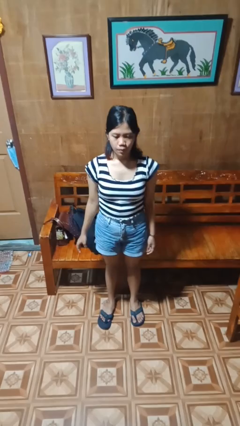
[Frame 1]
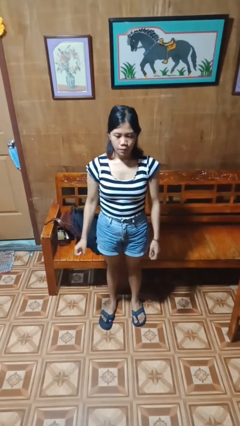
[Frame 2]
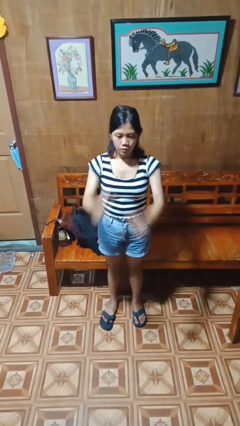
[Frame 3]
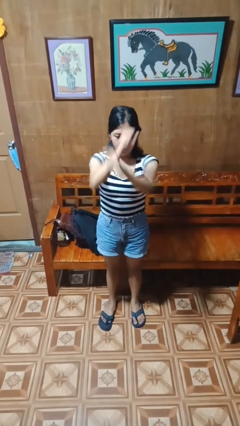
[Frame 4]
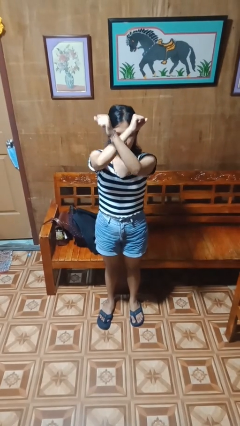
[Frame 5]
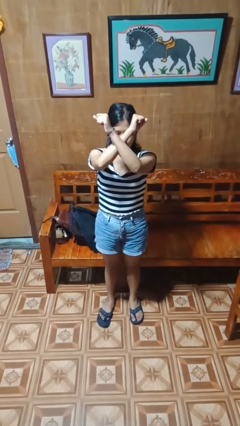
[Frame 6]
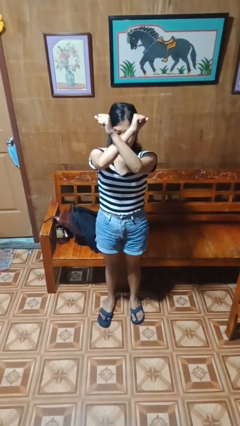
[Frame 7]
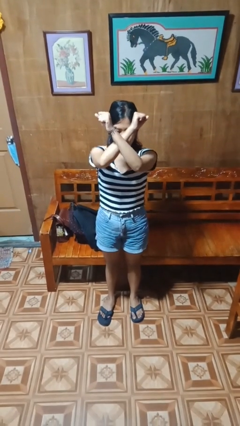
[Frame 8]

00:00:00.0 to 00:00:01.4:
person gestures arms x

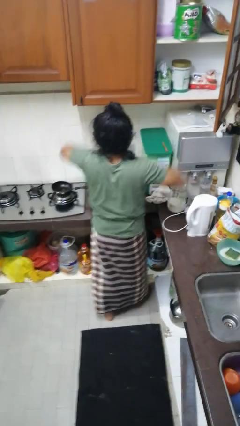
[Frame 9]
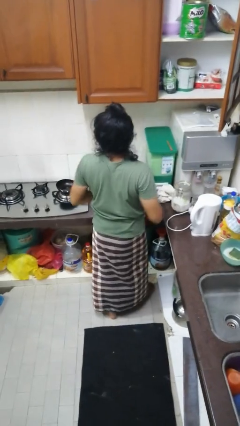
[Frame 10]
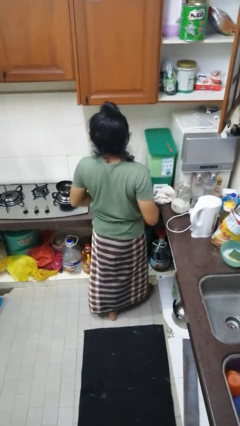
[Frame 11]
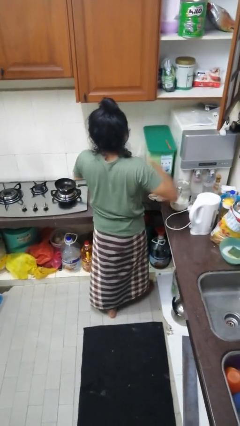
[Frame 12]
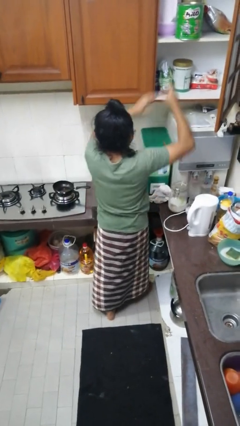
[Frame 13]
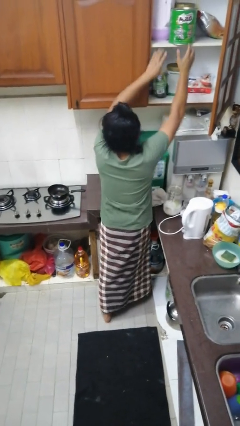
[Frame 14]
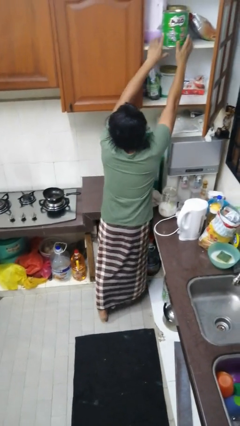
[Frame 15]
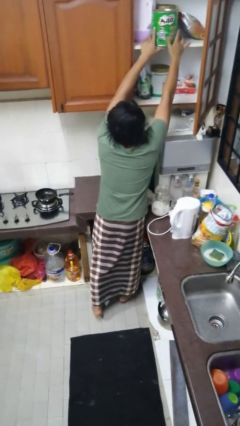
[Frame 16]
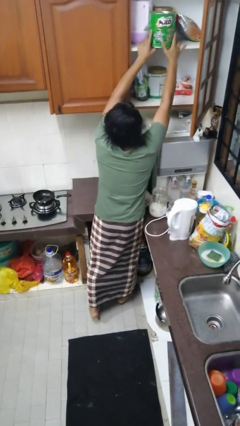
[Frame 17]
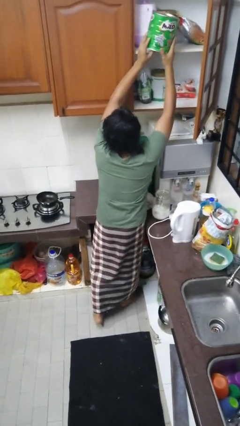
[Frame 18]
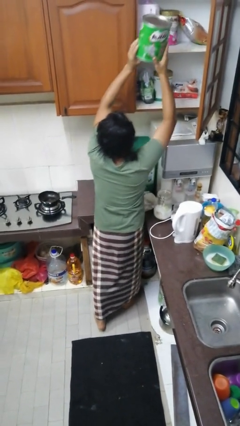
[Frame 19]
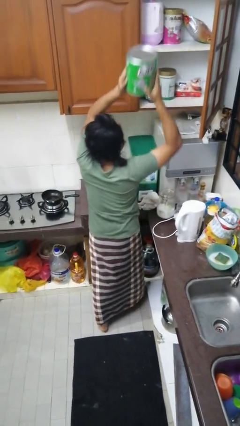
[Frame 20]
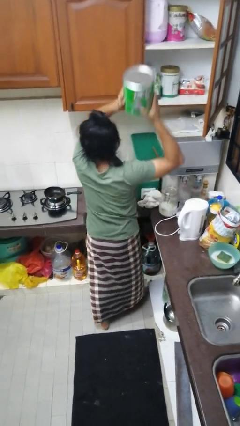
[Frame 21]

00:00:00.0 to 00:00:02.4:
person takes object from cabinet

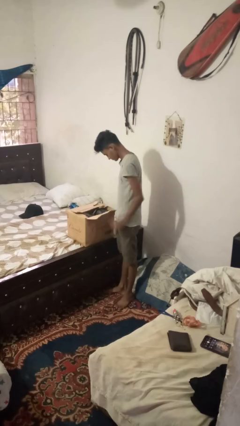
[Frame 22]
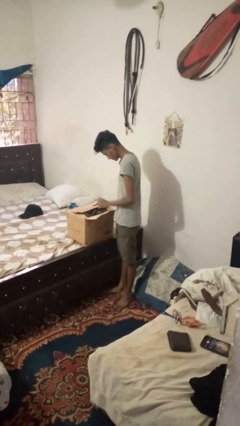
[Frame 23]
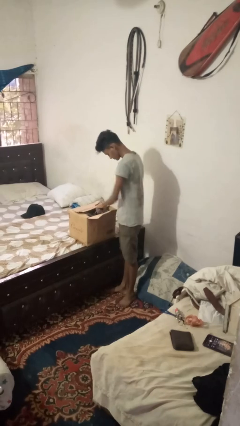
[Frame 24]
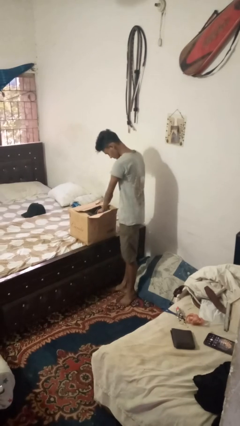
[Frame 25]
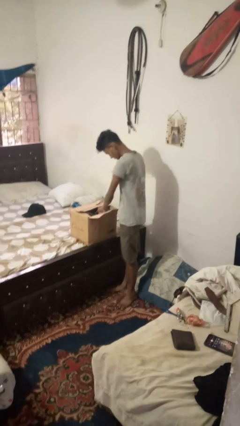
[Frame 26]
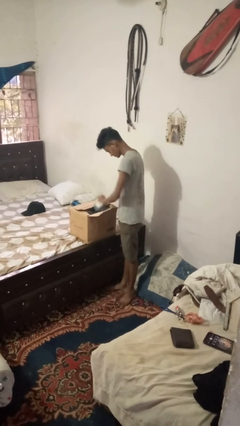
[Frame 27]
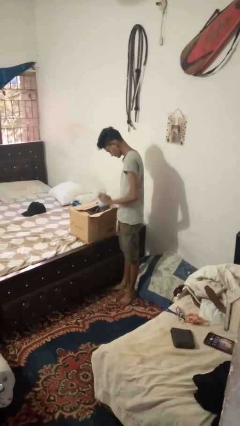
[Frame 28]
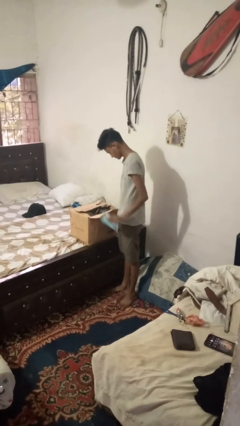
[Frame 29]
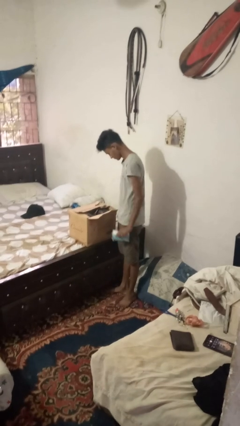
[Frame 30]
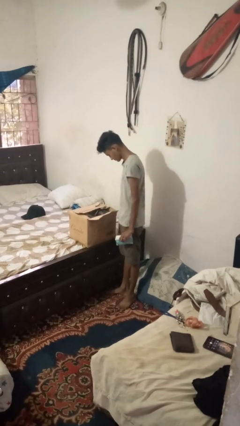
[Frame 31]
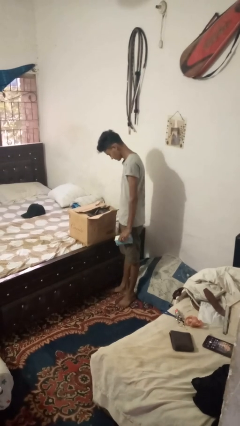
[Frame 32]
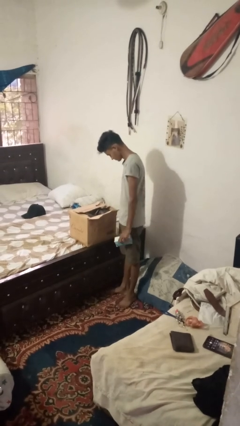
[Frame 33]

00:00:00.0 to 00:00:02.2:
person takes object from box

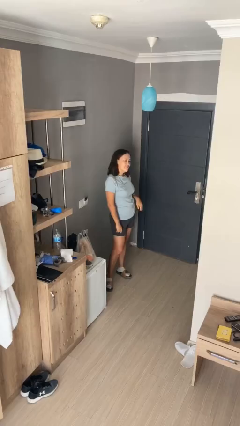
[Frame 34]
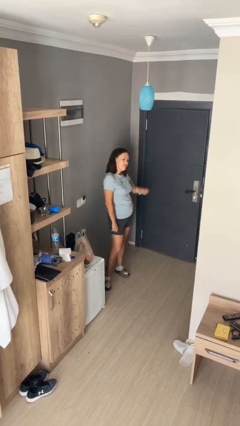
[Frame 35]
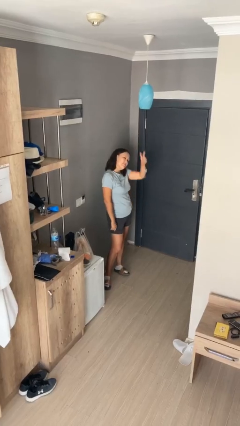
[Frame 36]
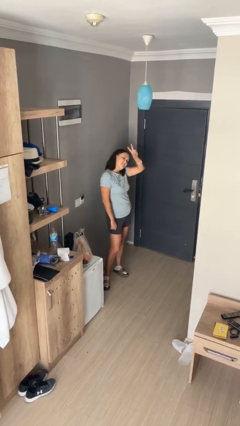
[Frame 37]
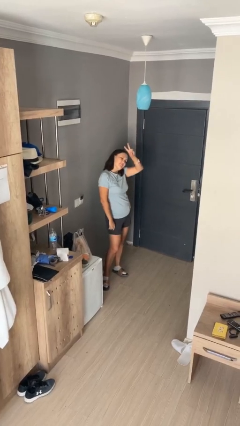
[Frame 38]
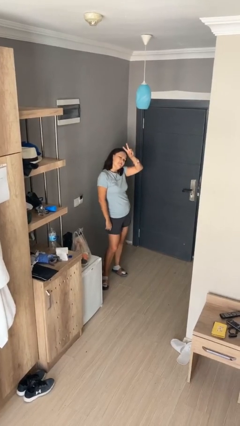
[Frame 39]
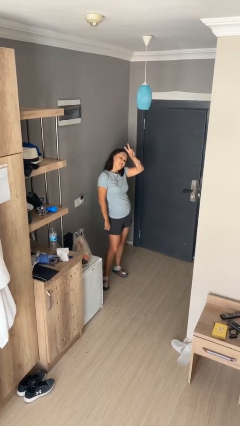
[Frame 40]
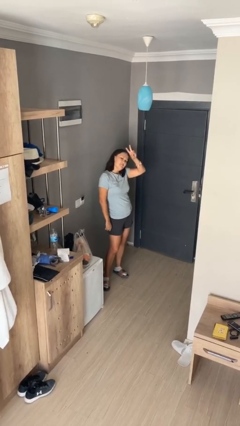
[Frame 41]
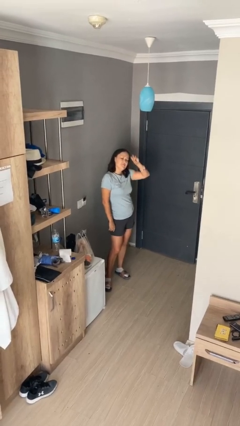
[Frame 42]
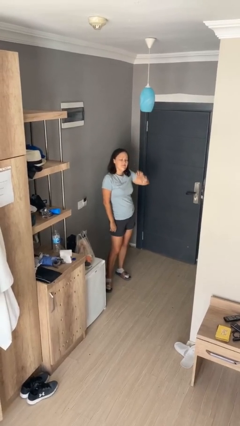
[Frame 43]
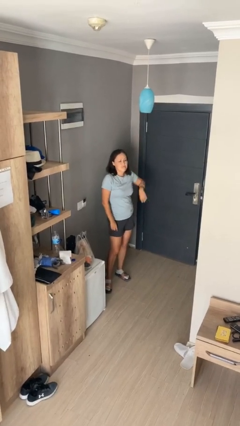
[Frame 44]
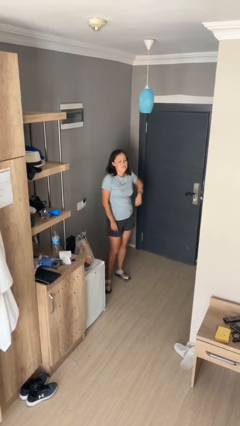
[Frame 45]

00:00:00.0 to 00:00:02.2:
person gestures peace

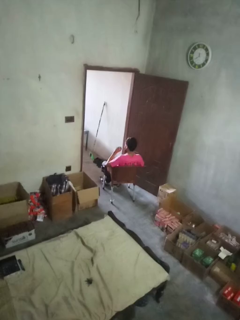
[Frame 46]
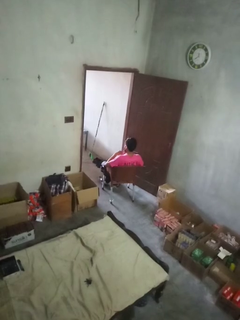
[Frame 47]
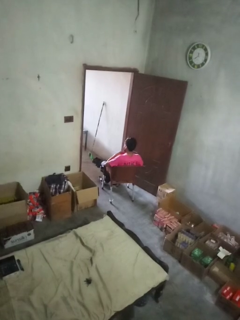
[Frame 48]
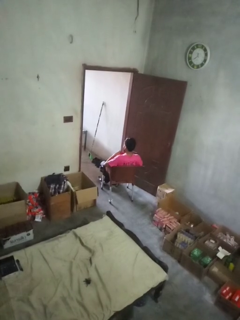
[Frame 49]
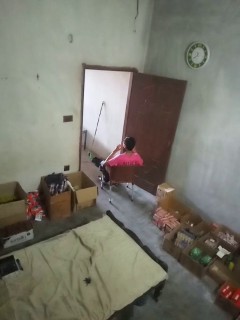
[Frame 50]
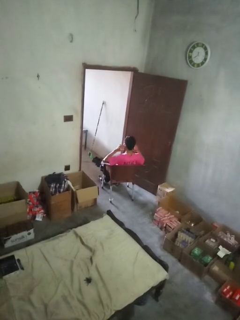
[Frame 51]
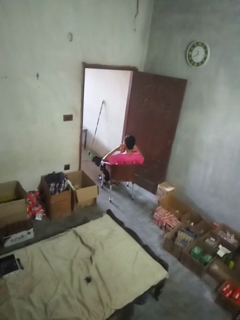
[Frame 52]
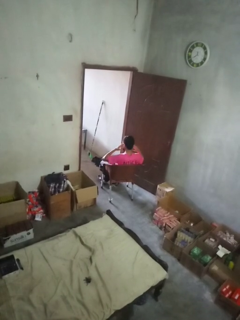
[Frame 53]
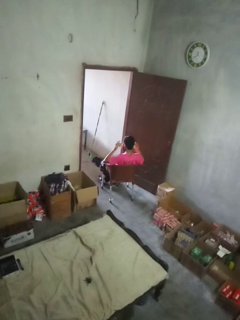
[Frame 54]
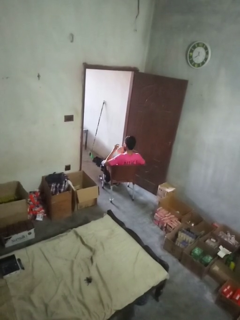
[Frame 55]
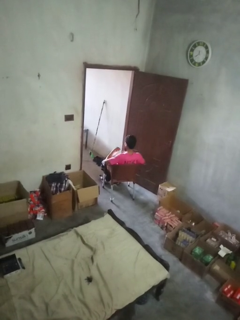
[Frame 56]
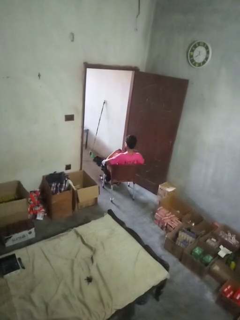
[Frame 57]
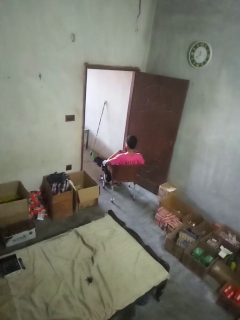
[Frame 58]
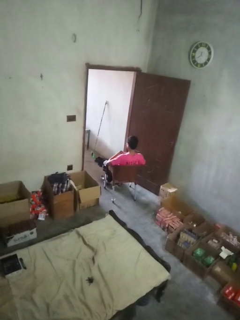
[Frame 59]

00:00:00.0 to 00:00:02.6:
person takes off facemask

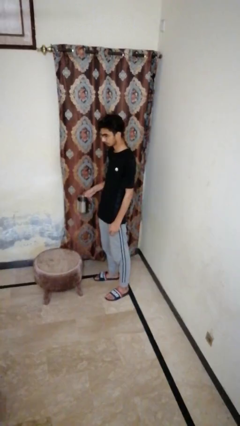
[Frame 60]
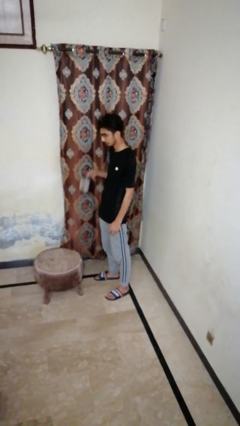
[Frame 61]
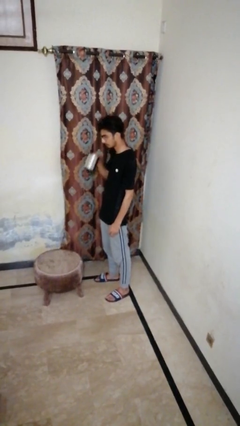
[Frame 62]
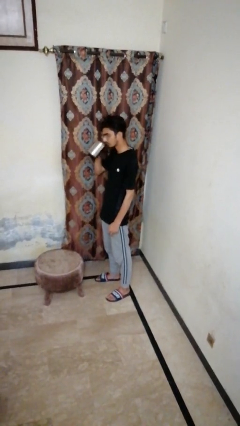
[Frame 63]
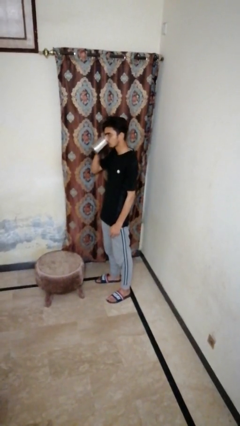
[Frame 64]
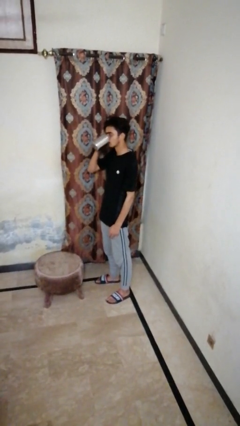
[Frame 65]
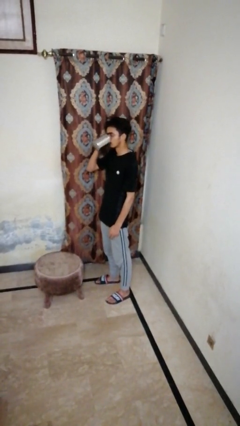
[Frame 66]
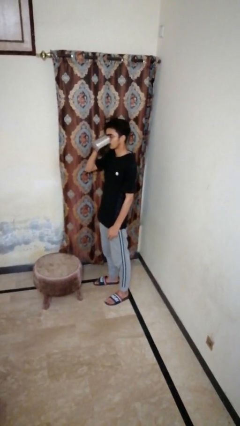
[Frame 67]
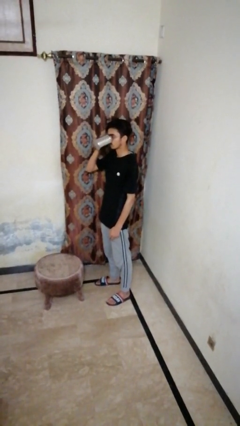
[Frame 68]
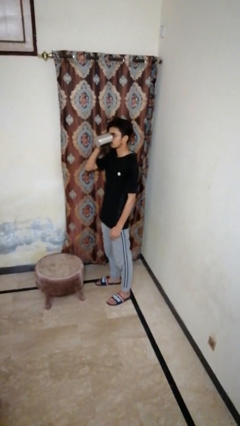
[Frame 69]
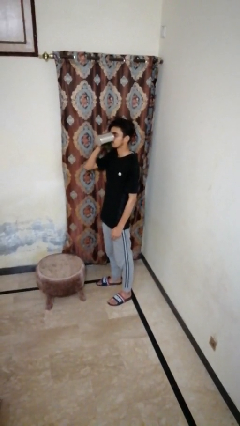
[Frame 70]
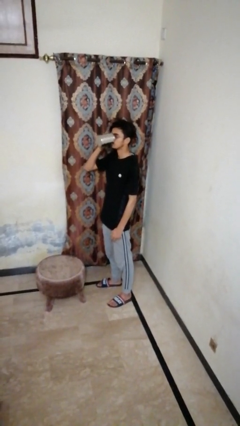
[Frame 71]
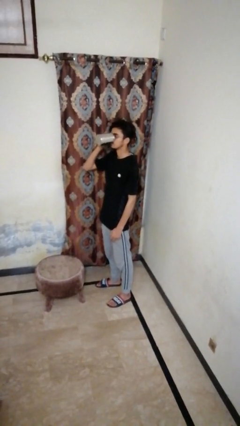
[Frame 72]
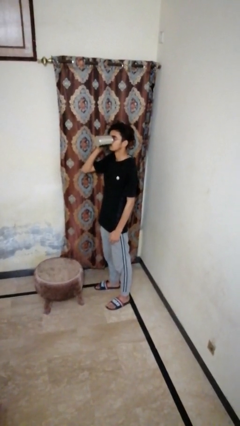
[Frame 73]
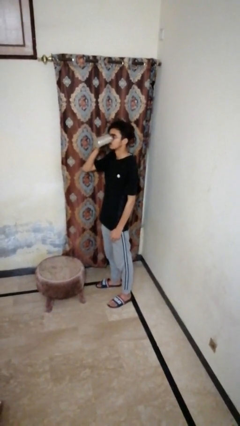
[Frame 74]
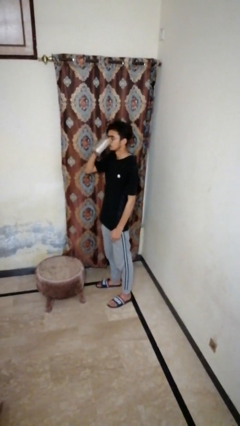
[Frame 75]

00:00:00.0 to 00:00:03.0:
person drinks from mug

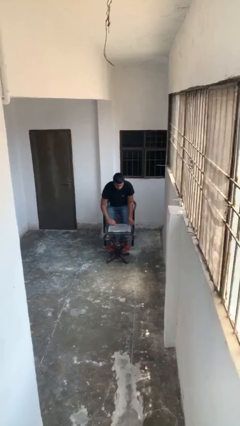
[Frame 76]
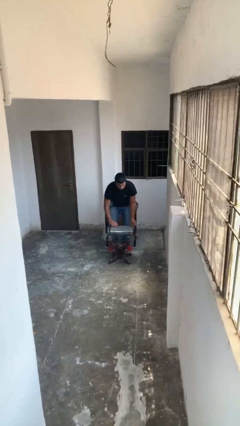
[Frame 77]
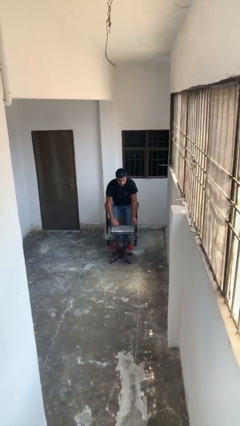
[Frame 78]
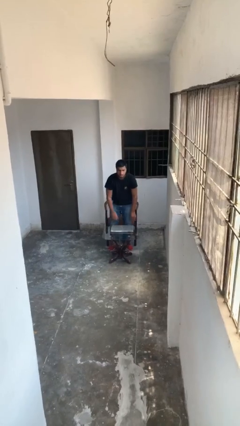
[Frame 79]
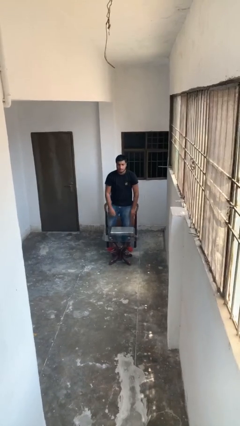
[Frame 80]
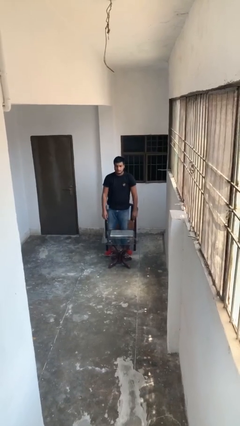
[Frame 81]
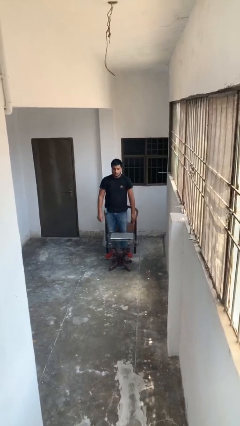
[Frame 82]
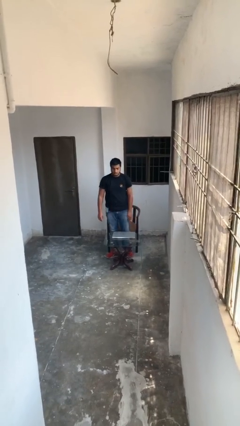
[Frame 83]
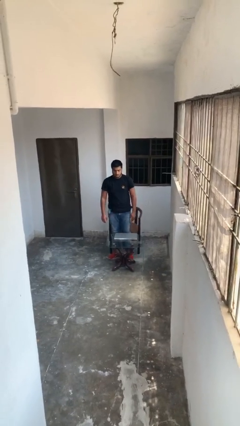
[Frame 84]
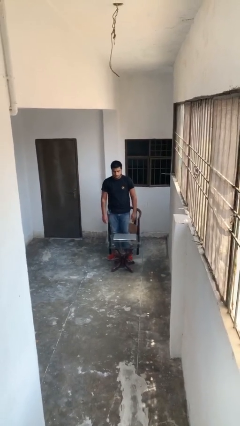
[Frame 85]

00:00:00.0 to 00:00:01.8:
person stands up

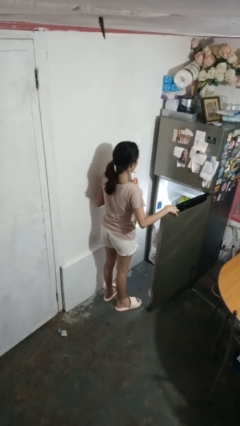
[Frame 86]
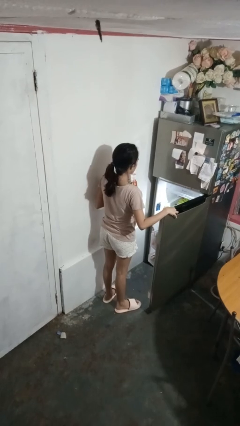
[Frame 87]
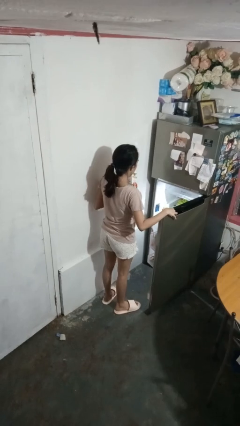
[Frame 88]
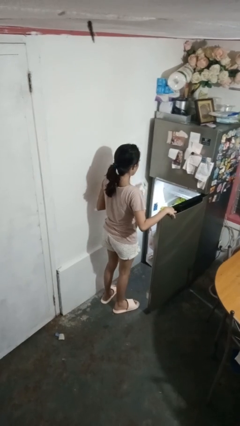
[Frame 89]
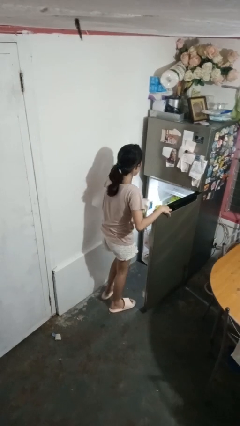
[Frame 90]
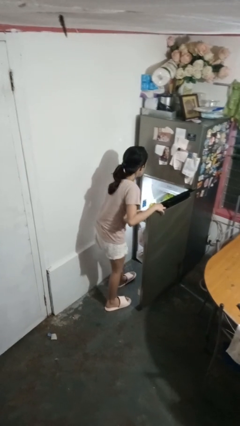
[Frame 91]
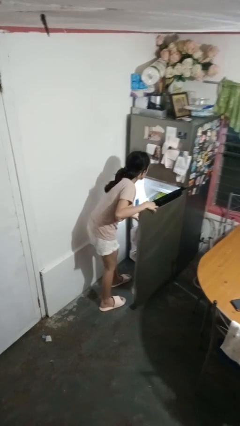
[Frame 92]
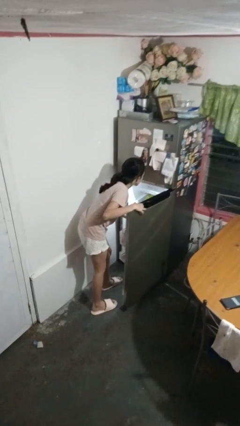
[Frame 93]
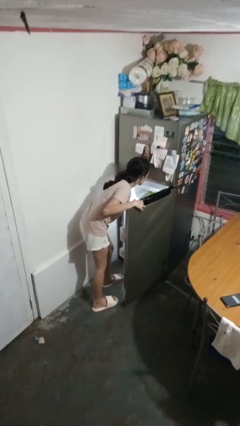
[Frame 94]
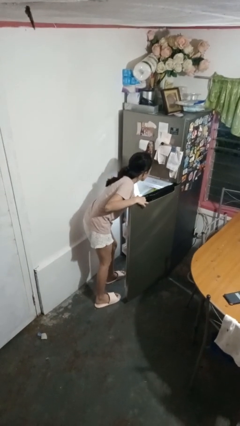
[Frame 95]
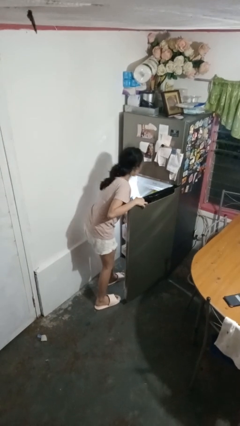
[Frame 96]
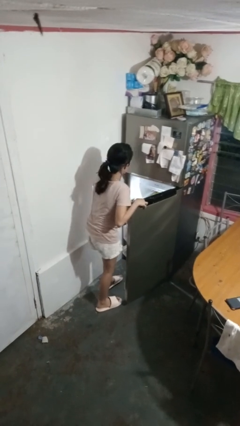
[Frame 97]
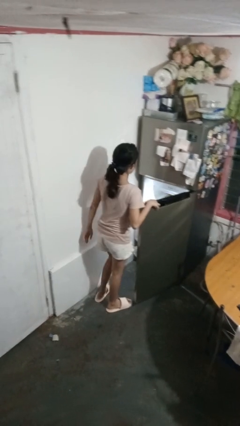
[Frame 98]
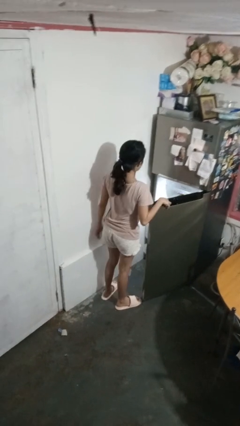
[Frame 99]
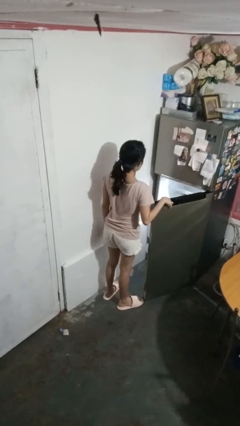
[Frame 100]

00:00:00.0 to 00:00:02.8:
person puts object into refrigerator
